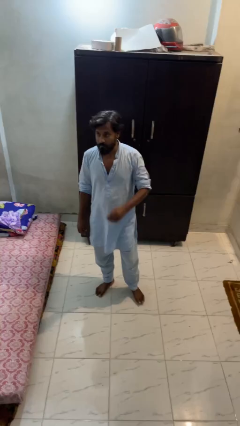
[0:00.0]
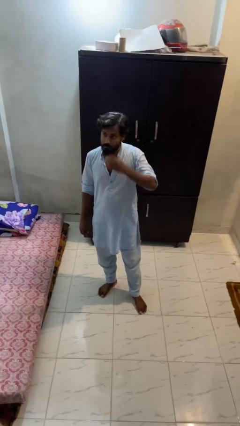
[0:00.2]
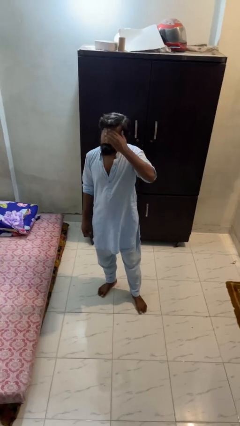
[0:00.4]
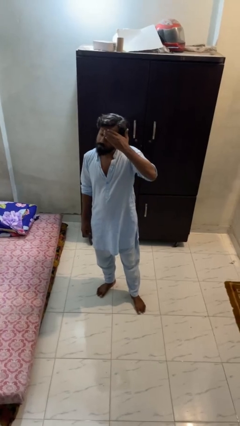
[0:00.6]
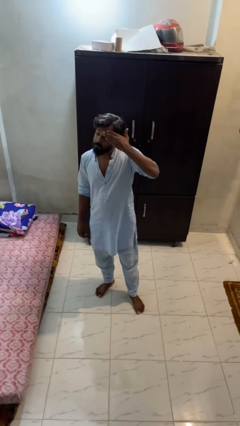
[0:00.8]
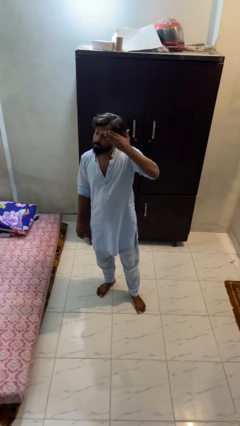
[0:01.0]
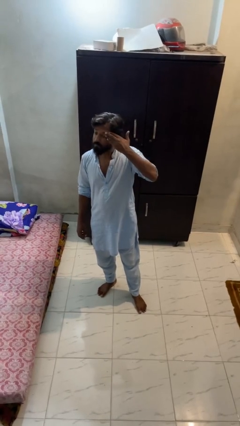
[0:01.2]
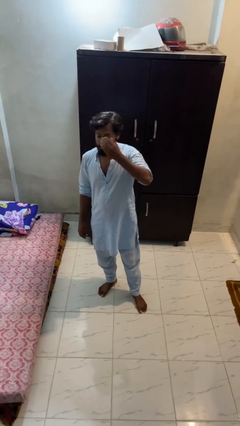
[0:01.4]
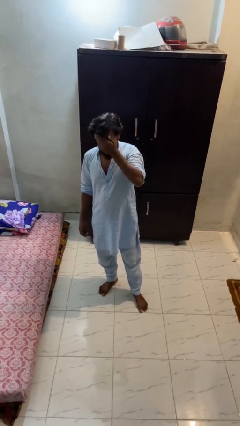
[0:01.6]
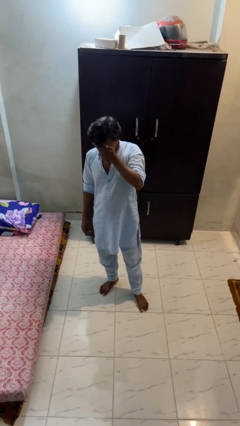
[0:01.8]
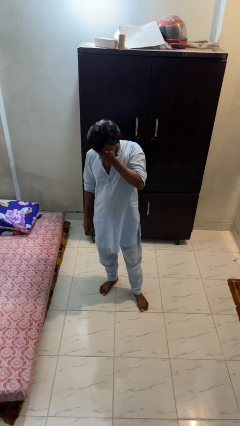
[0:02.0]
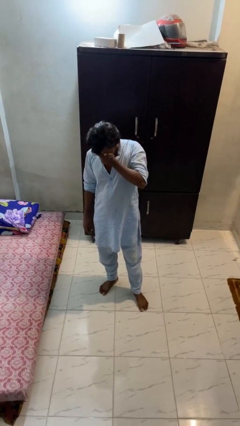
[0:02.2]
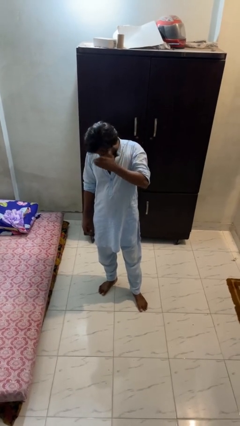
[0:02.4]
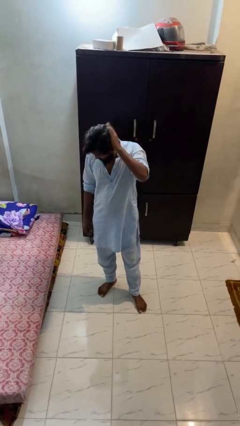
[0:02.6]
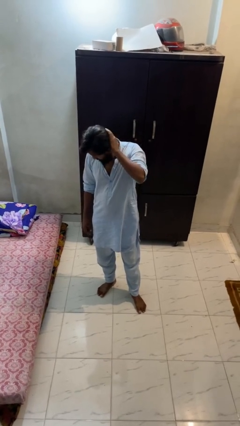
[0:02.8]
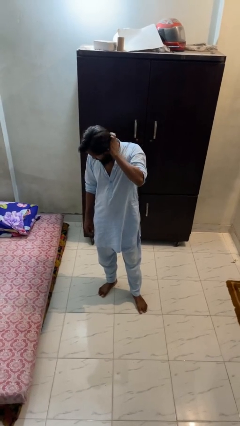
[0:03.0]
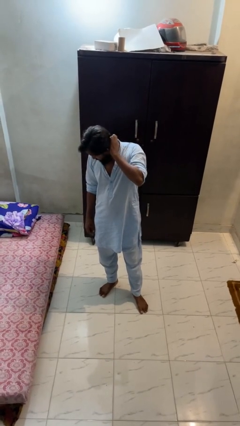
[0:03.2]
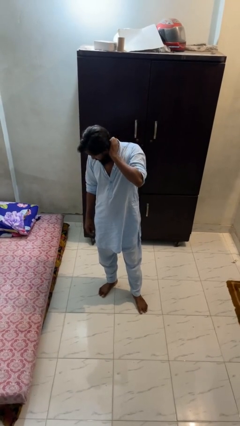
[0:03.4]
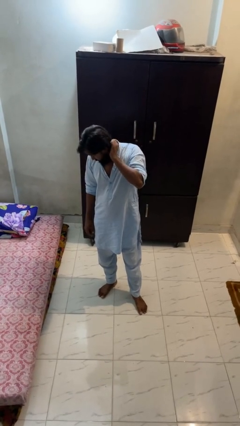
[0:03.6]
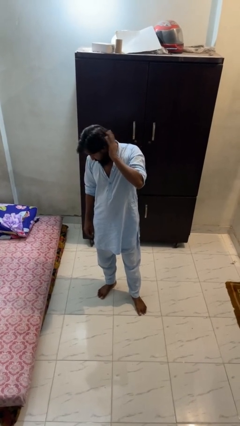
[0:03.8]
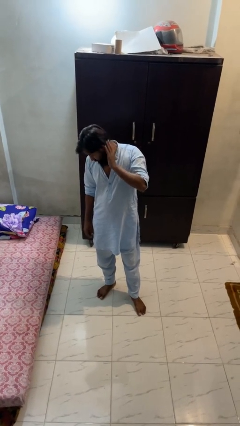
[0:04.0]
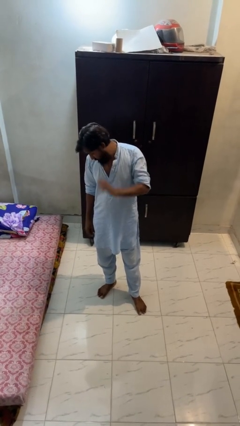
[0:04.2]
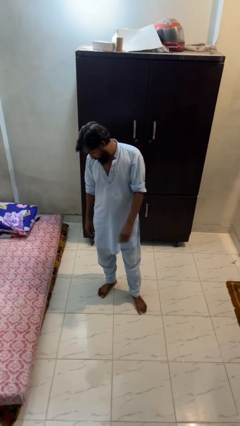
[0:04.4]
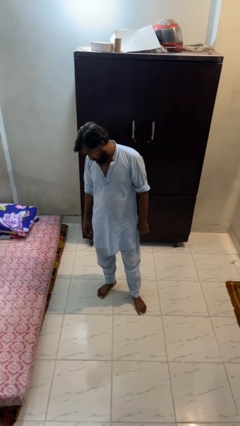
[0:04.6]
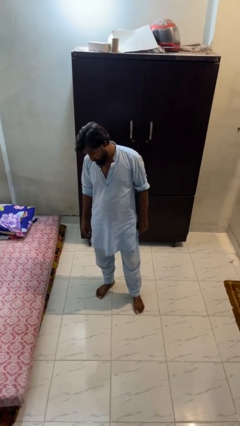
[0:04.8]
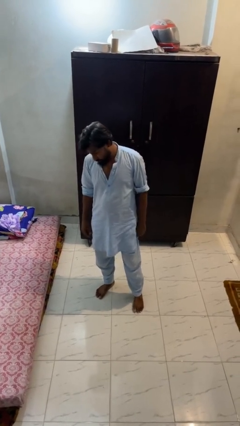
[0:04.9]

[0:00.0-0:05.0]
person scratches face

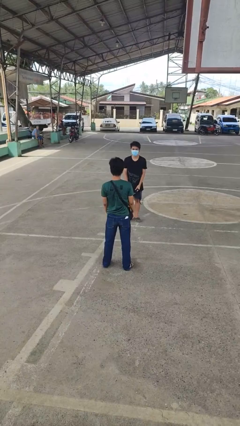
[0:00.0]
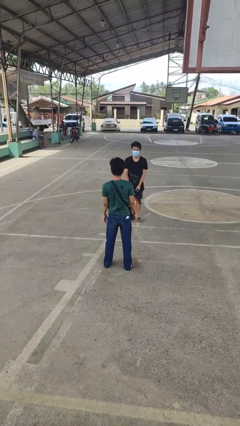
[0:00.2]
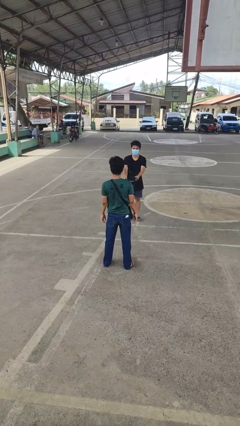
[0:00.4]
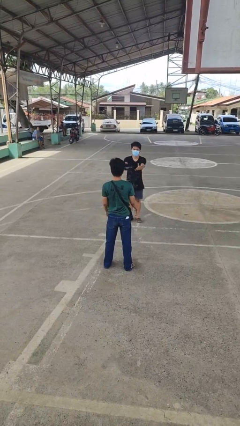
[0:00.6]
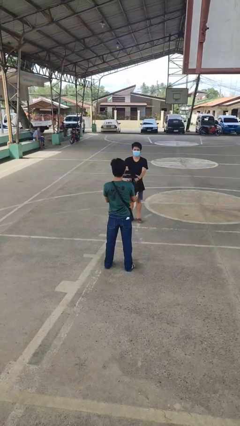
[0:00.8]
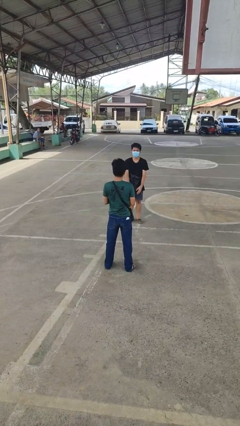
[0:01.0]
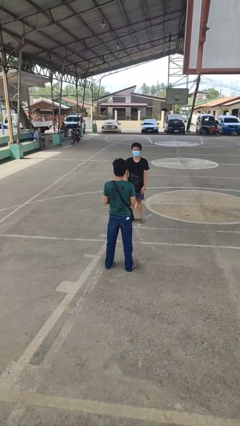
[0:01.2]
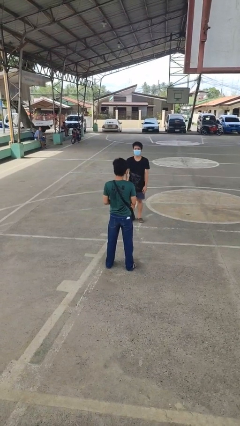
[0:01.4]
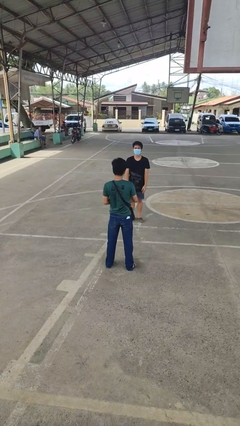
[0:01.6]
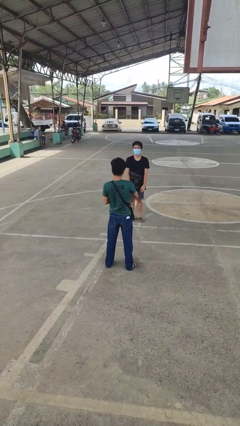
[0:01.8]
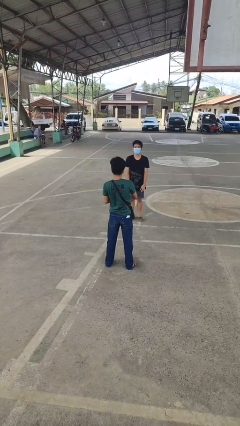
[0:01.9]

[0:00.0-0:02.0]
person catches object from person

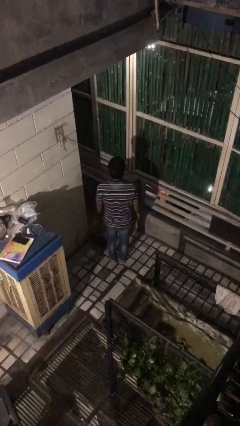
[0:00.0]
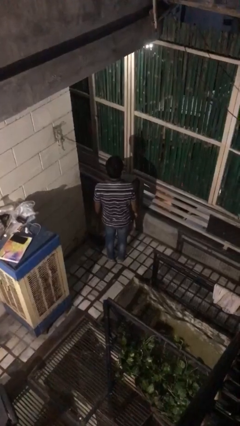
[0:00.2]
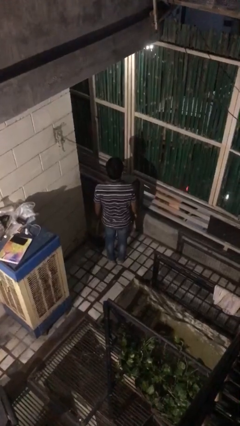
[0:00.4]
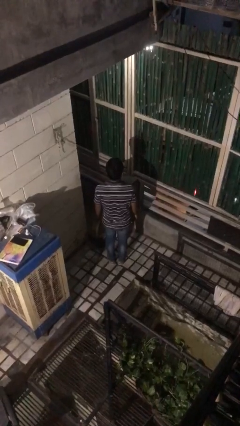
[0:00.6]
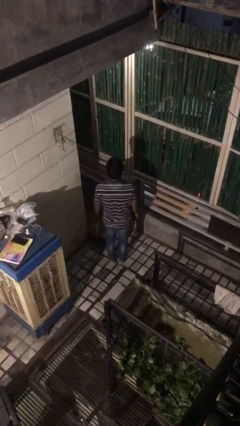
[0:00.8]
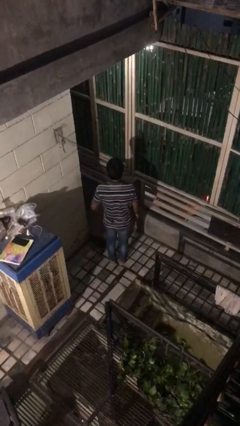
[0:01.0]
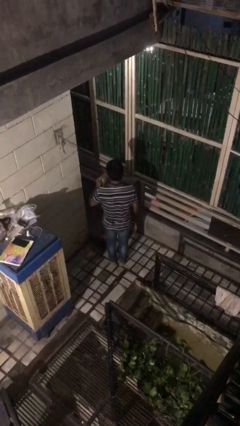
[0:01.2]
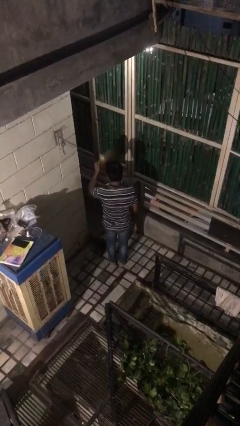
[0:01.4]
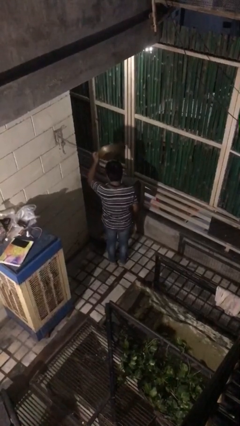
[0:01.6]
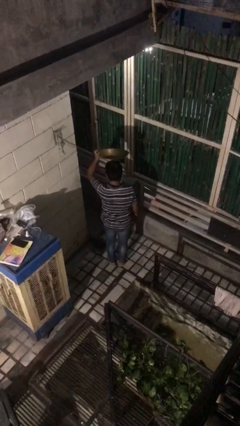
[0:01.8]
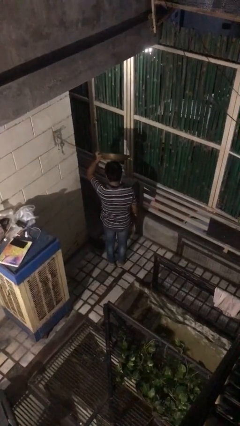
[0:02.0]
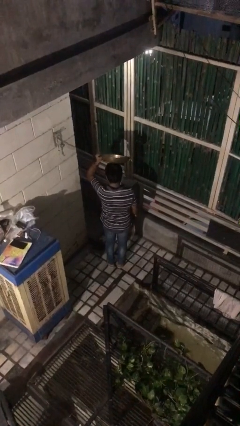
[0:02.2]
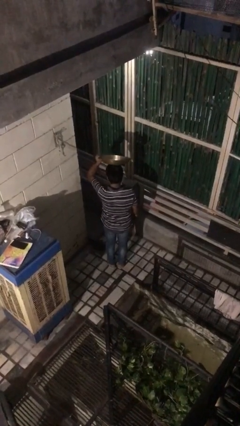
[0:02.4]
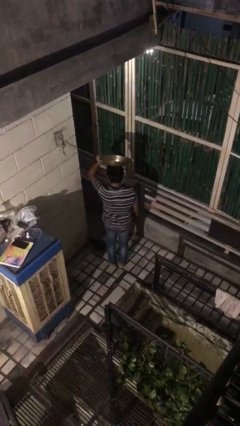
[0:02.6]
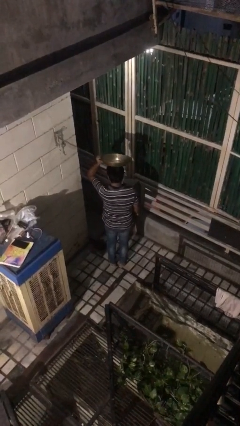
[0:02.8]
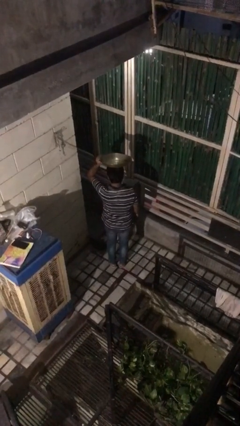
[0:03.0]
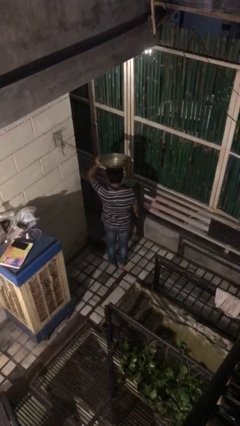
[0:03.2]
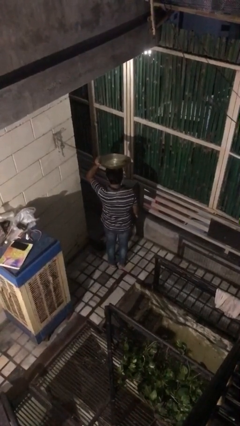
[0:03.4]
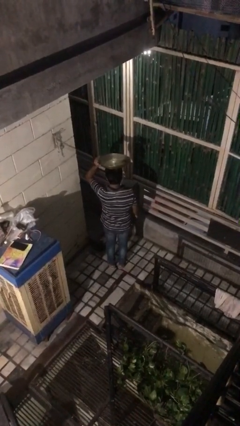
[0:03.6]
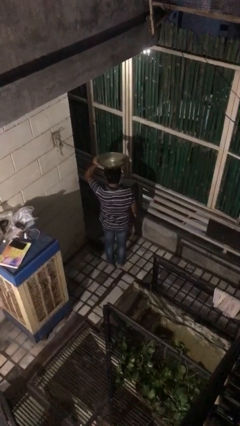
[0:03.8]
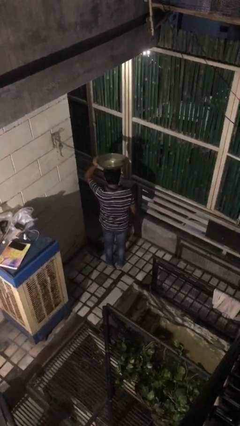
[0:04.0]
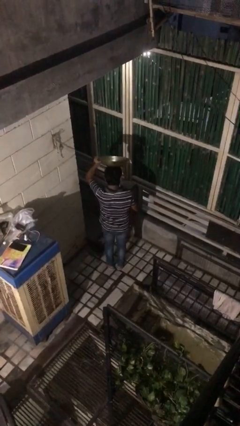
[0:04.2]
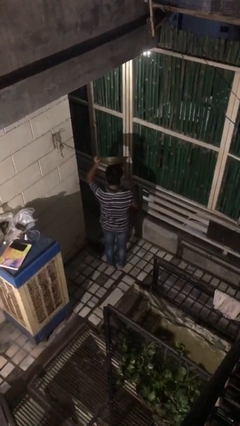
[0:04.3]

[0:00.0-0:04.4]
person holds object above head

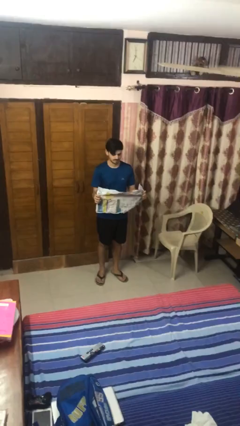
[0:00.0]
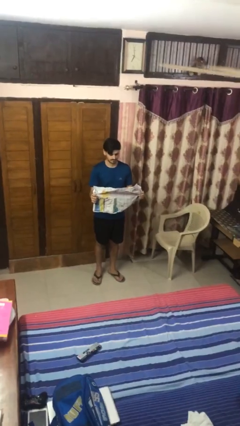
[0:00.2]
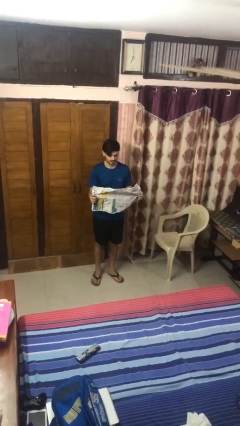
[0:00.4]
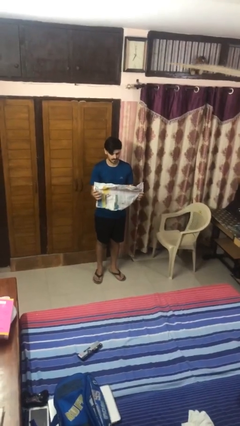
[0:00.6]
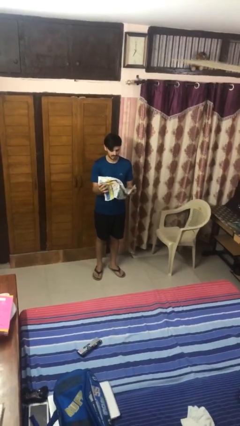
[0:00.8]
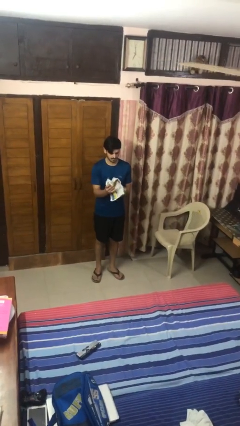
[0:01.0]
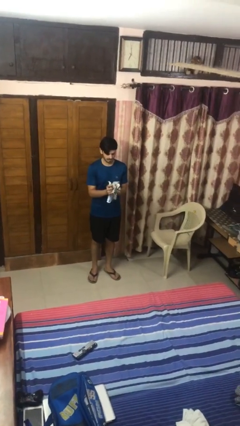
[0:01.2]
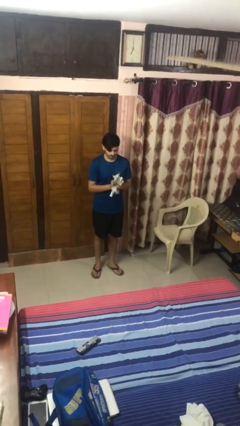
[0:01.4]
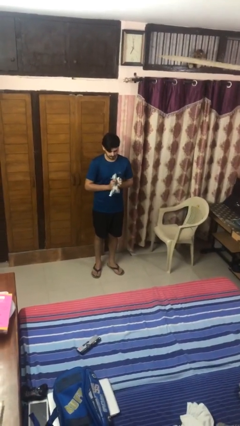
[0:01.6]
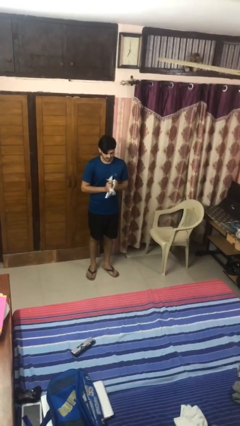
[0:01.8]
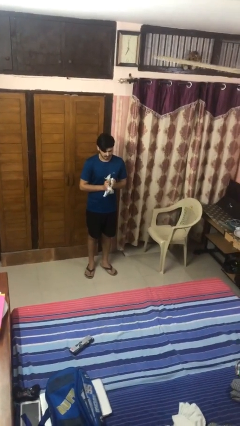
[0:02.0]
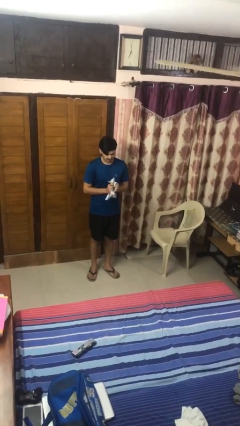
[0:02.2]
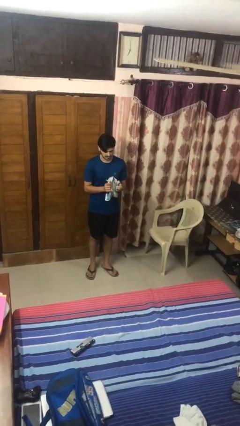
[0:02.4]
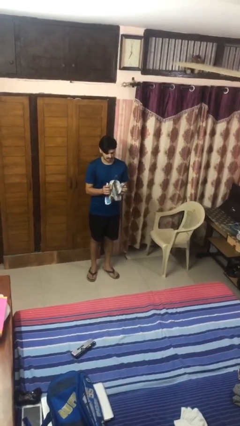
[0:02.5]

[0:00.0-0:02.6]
person crumples paper

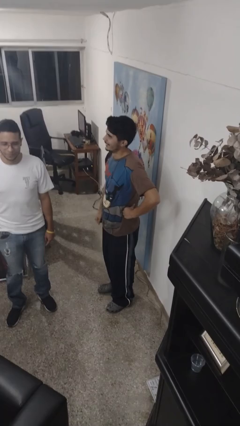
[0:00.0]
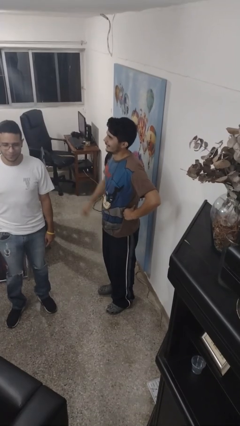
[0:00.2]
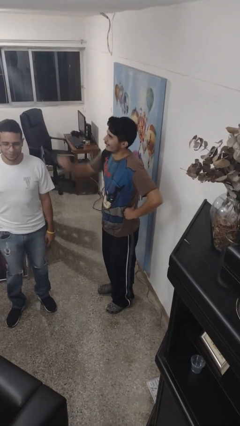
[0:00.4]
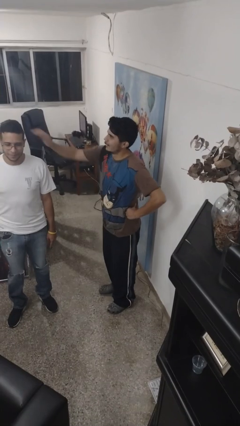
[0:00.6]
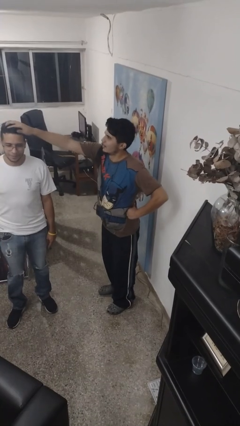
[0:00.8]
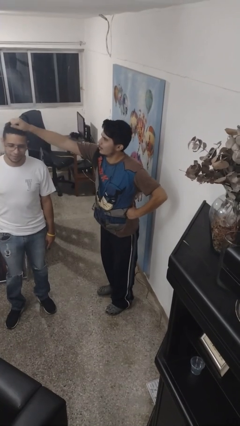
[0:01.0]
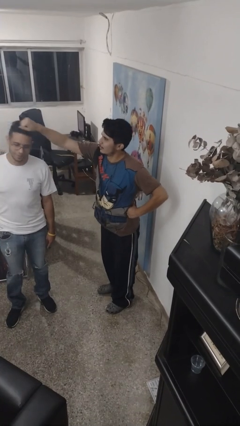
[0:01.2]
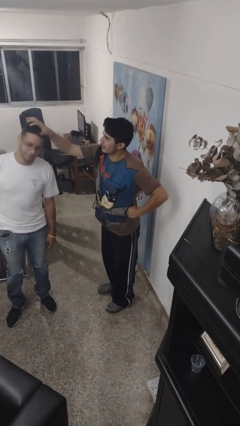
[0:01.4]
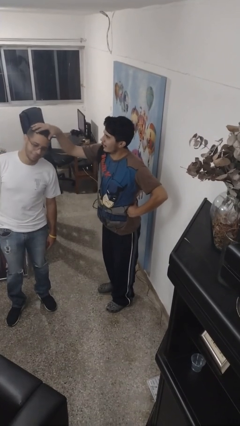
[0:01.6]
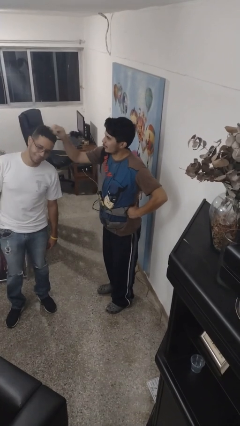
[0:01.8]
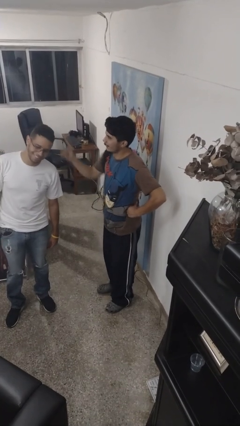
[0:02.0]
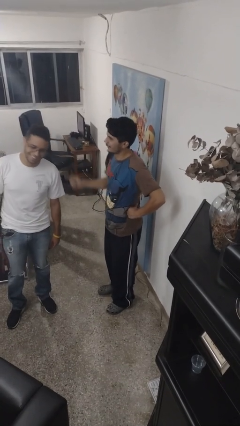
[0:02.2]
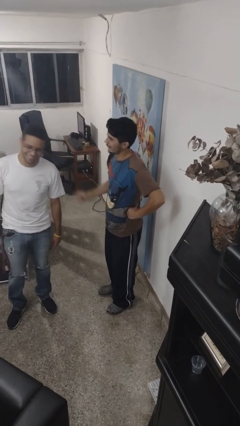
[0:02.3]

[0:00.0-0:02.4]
person grabs person by hair

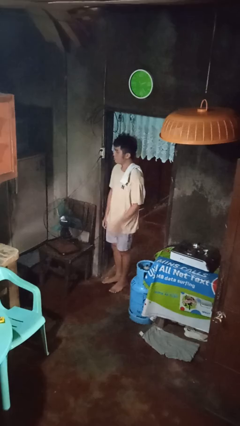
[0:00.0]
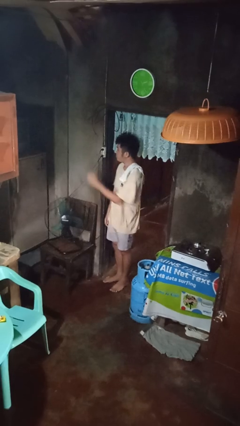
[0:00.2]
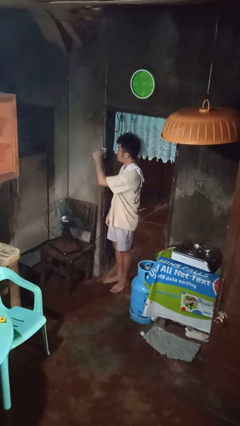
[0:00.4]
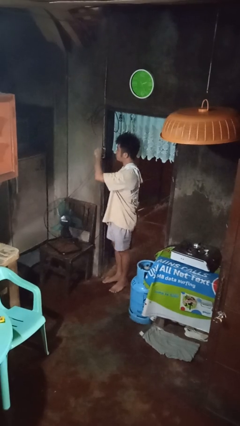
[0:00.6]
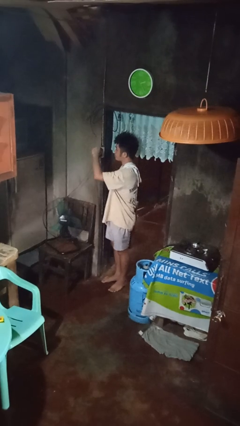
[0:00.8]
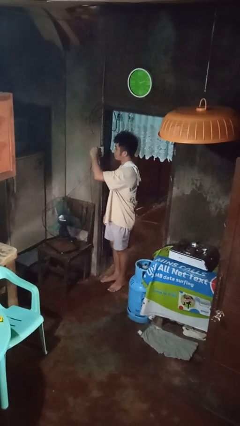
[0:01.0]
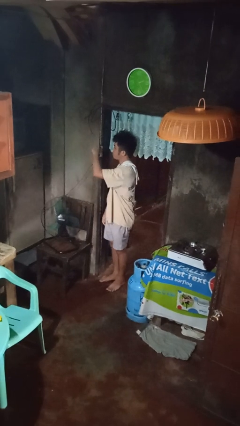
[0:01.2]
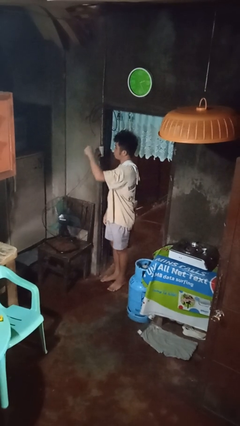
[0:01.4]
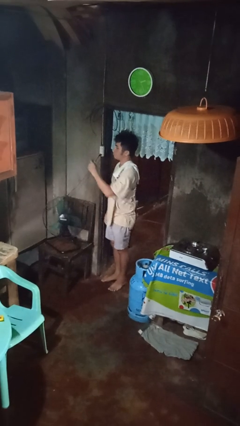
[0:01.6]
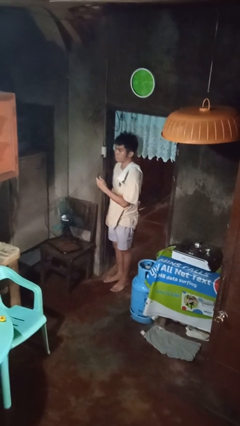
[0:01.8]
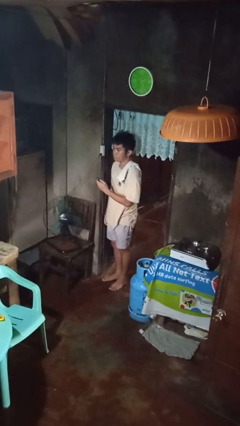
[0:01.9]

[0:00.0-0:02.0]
person unplugs from electrical socket
